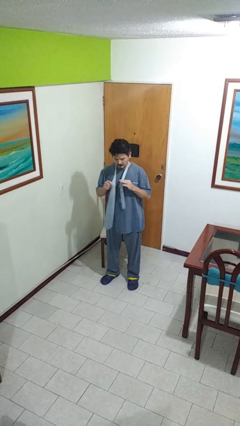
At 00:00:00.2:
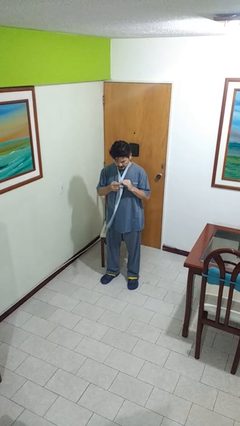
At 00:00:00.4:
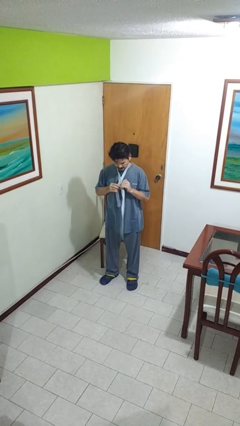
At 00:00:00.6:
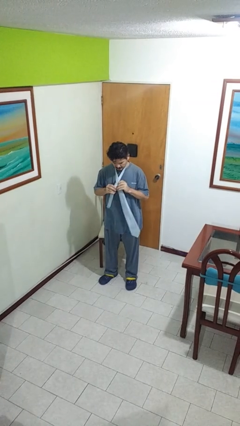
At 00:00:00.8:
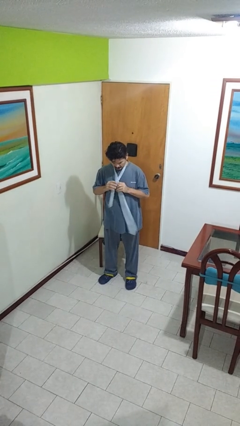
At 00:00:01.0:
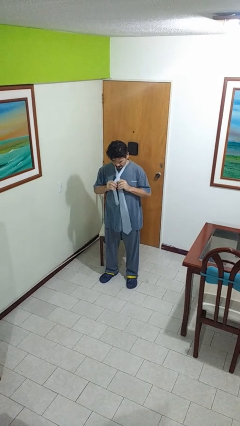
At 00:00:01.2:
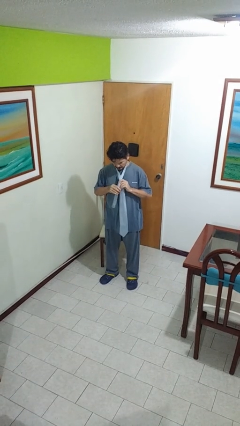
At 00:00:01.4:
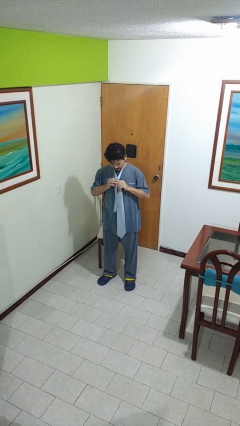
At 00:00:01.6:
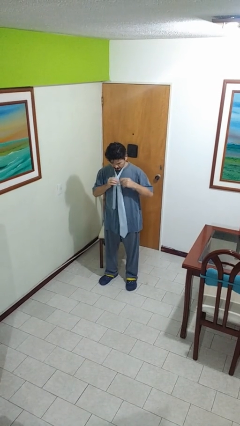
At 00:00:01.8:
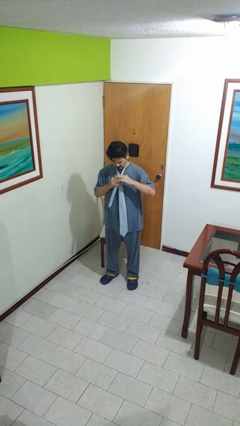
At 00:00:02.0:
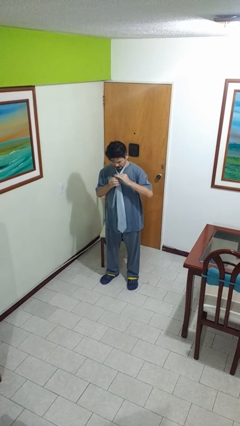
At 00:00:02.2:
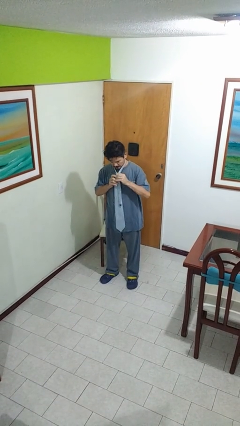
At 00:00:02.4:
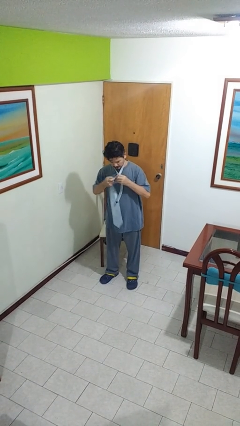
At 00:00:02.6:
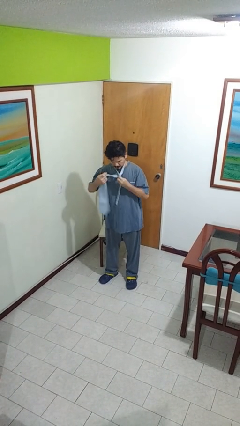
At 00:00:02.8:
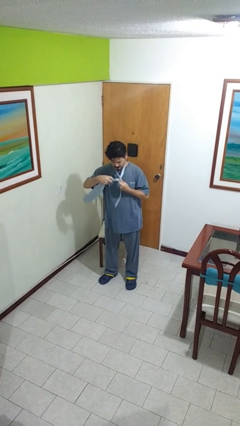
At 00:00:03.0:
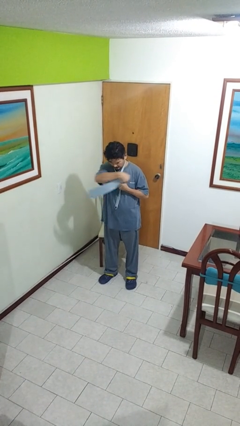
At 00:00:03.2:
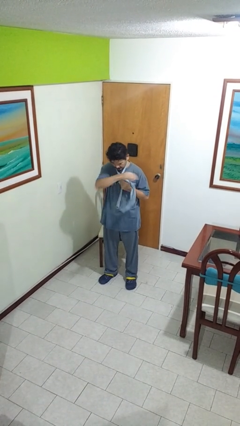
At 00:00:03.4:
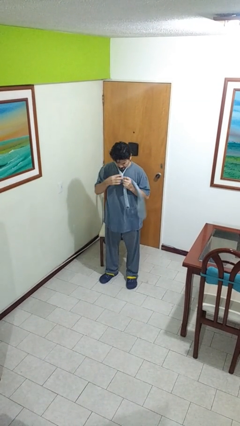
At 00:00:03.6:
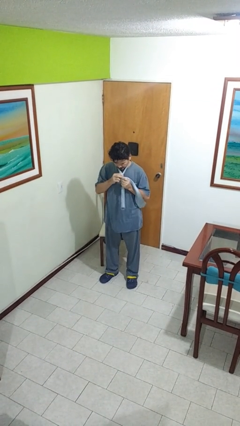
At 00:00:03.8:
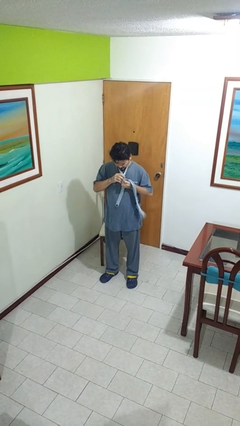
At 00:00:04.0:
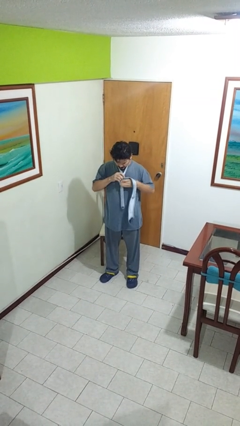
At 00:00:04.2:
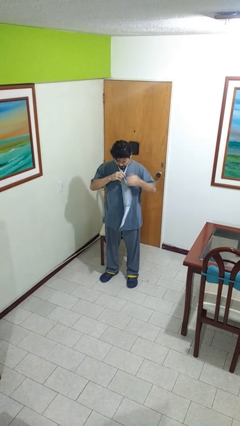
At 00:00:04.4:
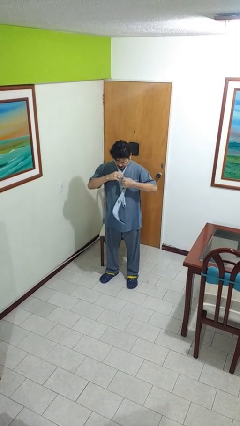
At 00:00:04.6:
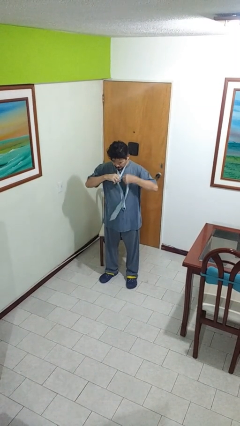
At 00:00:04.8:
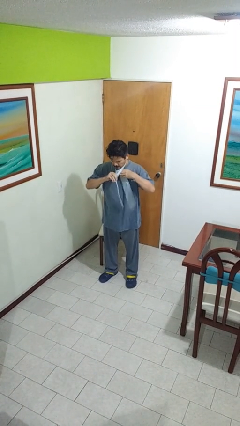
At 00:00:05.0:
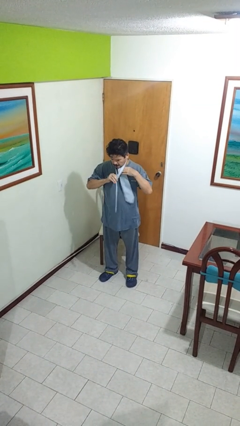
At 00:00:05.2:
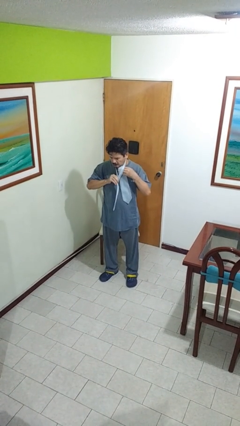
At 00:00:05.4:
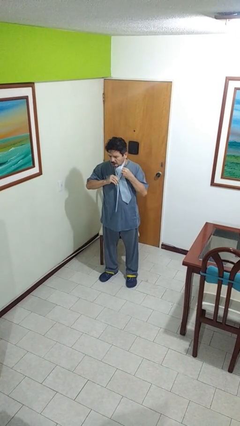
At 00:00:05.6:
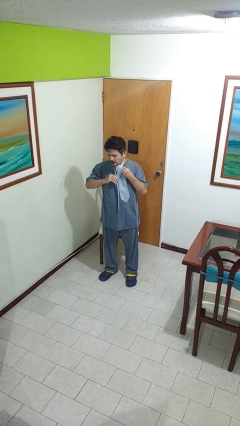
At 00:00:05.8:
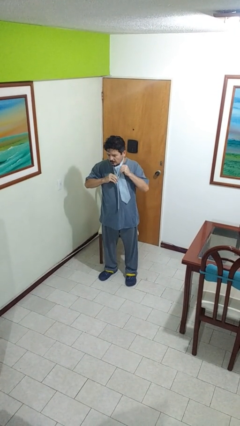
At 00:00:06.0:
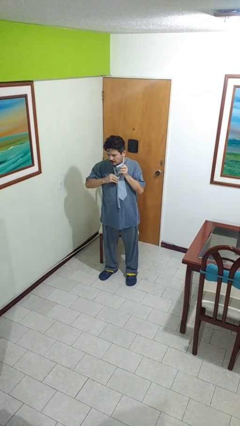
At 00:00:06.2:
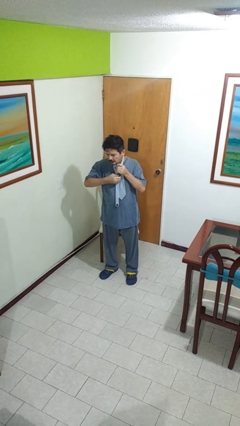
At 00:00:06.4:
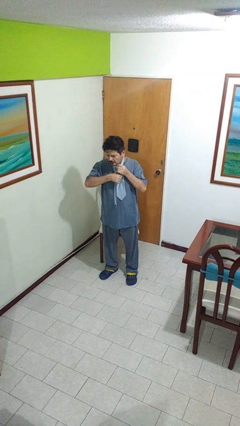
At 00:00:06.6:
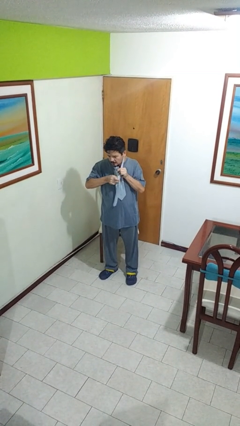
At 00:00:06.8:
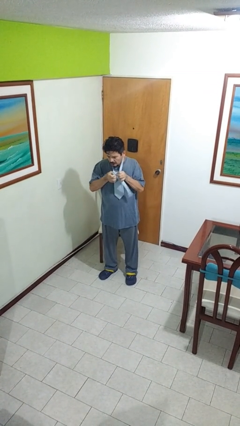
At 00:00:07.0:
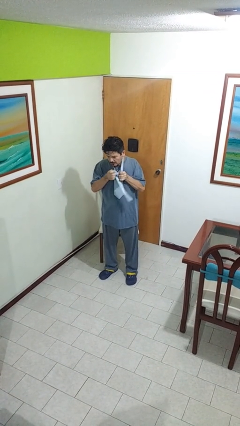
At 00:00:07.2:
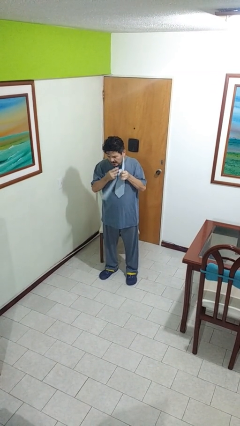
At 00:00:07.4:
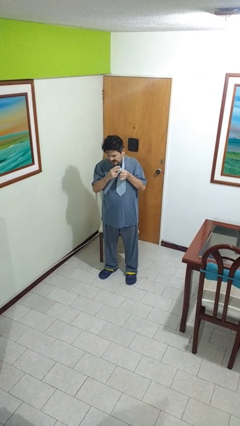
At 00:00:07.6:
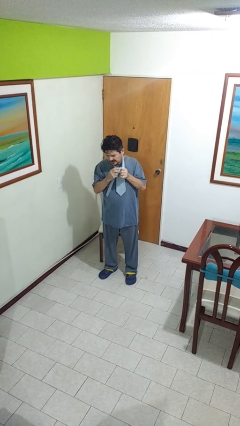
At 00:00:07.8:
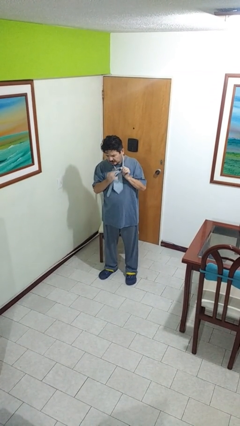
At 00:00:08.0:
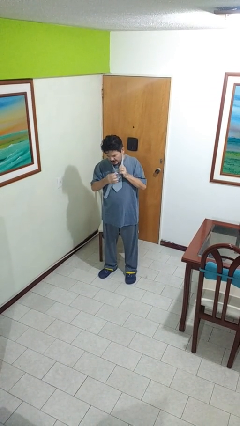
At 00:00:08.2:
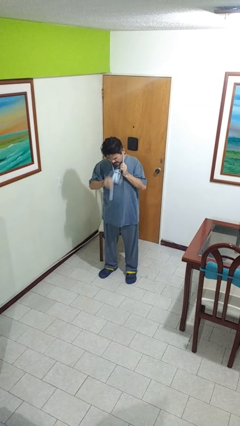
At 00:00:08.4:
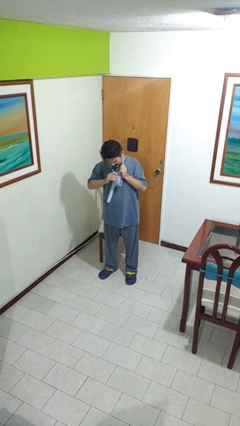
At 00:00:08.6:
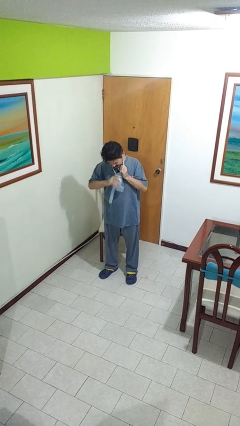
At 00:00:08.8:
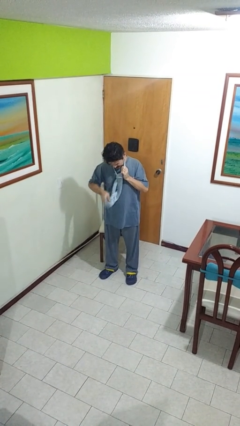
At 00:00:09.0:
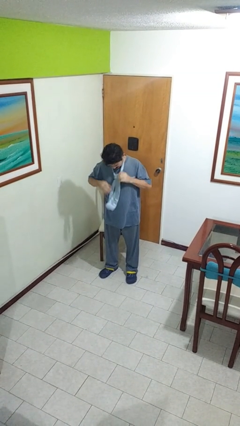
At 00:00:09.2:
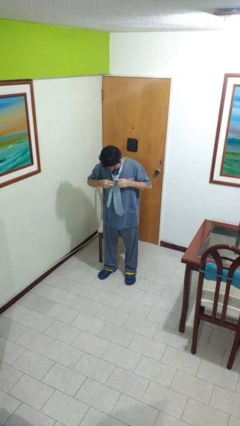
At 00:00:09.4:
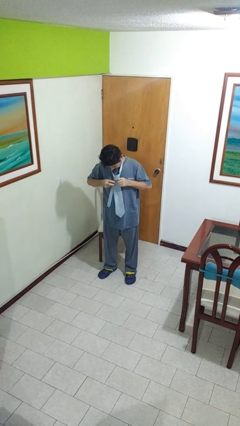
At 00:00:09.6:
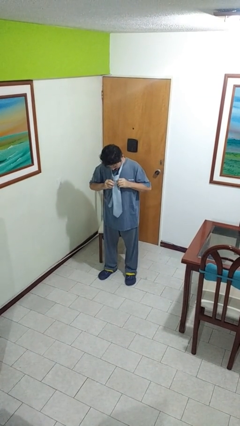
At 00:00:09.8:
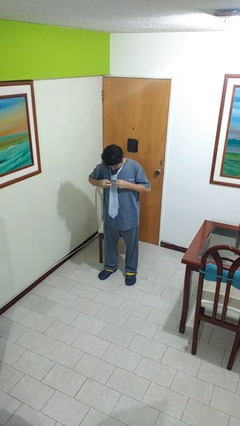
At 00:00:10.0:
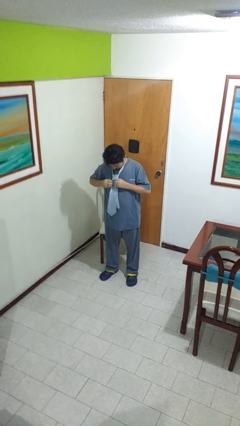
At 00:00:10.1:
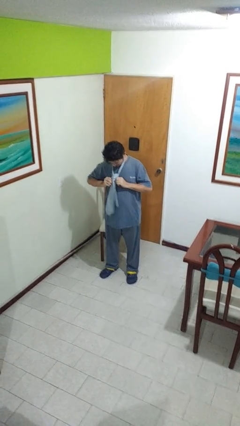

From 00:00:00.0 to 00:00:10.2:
person puts on necktie

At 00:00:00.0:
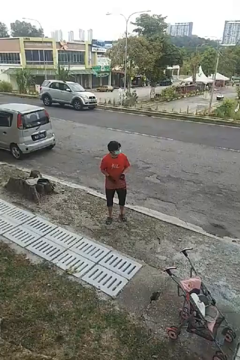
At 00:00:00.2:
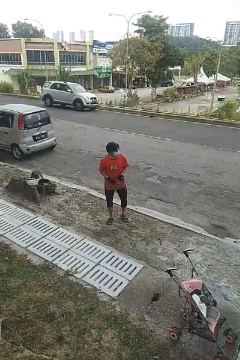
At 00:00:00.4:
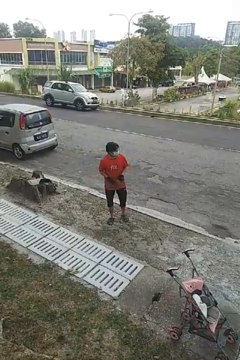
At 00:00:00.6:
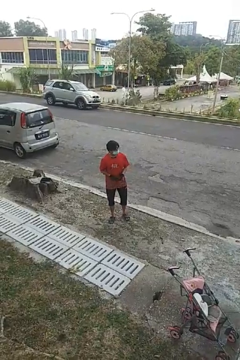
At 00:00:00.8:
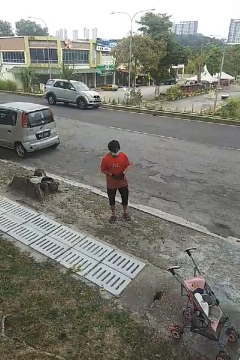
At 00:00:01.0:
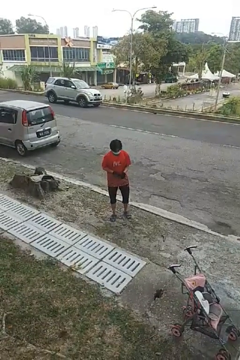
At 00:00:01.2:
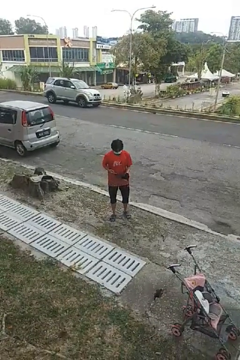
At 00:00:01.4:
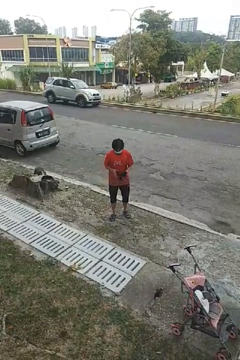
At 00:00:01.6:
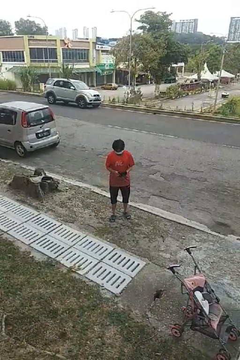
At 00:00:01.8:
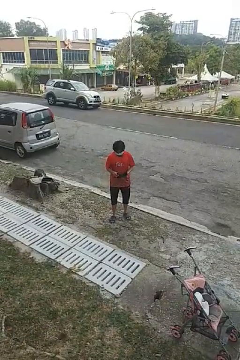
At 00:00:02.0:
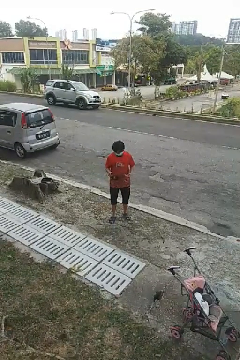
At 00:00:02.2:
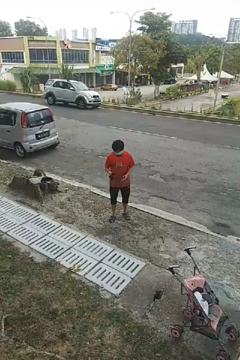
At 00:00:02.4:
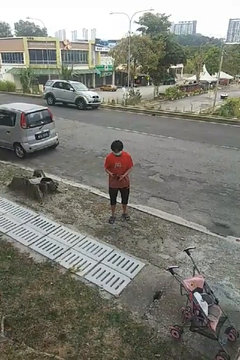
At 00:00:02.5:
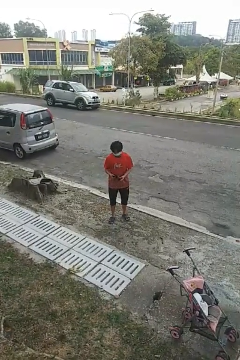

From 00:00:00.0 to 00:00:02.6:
person takes off gloves

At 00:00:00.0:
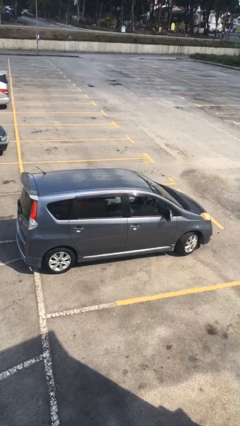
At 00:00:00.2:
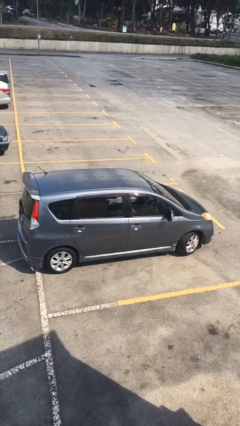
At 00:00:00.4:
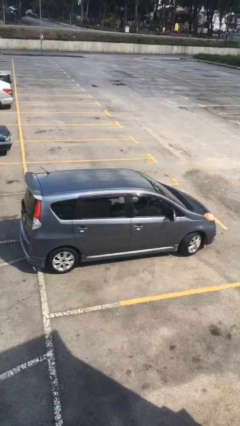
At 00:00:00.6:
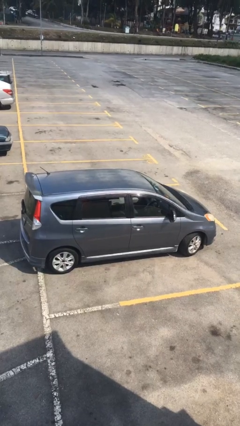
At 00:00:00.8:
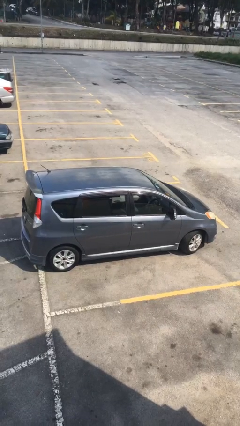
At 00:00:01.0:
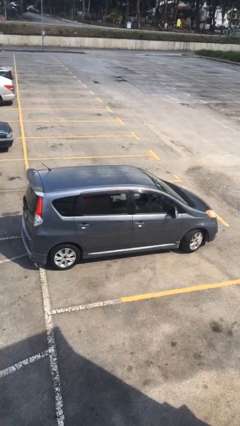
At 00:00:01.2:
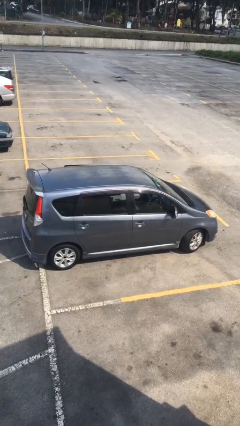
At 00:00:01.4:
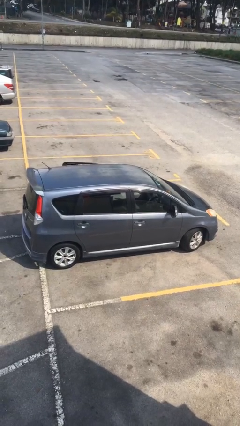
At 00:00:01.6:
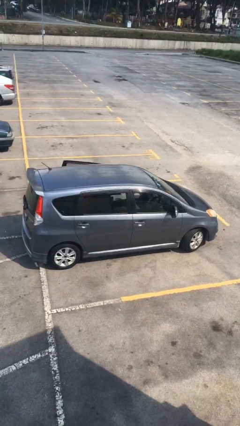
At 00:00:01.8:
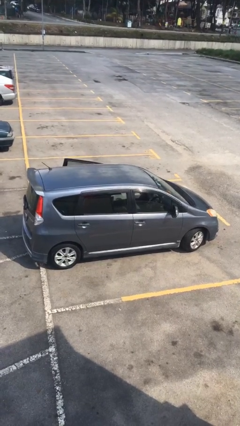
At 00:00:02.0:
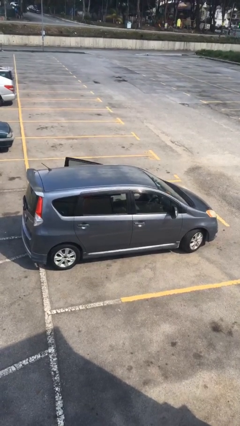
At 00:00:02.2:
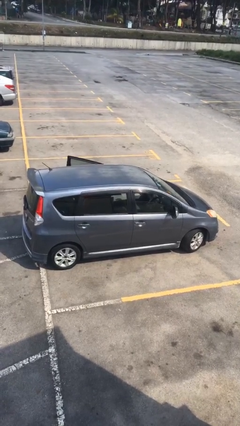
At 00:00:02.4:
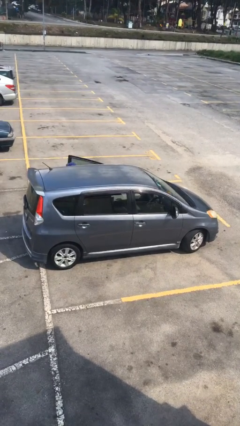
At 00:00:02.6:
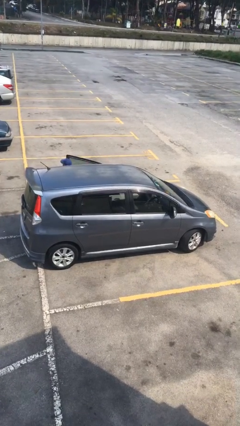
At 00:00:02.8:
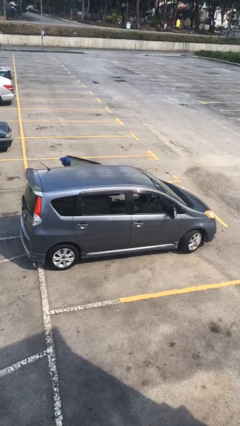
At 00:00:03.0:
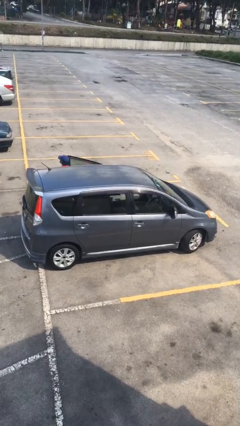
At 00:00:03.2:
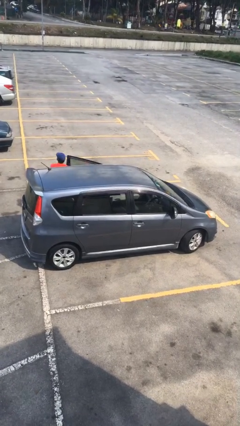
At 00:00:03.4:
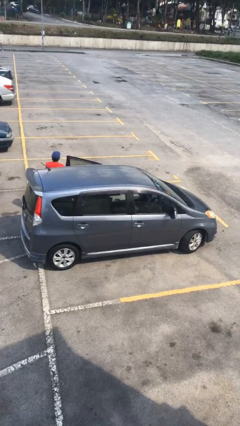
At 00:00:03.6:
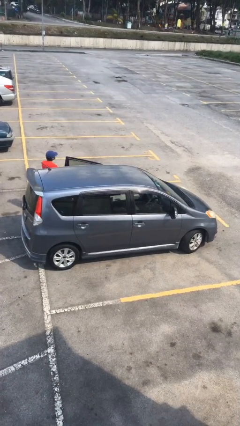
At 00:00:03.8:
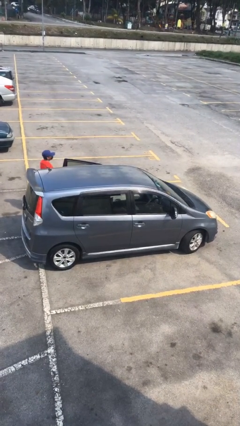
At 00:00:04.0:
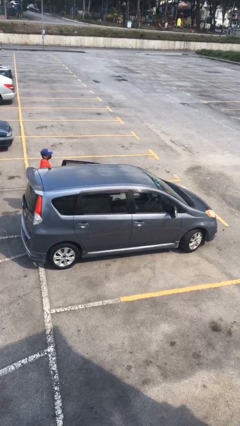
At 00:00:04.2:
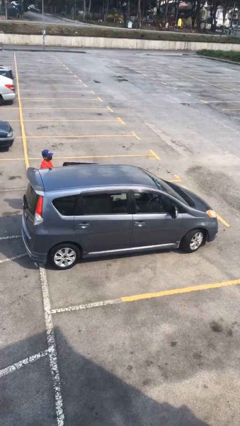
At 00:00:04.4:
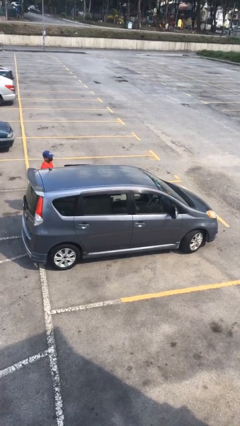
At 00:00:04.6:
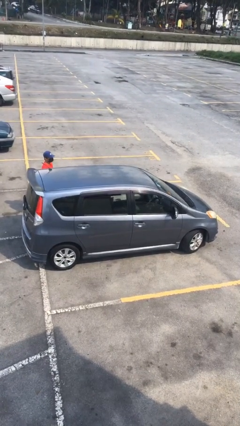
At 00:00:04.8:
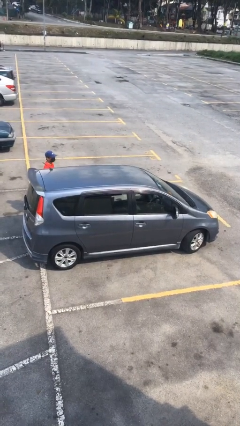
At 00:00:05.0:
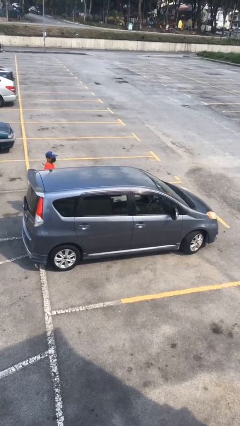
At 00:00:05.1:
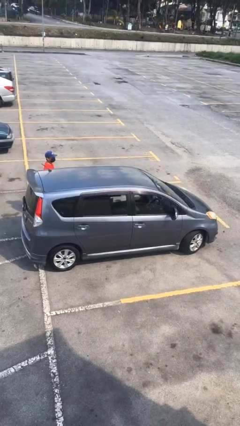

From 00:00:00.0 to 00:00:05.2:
car drops off person
